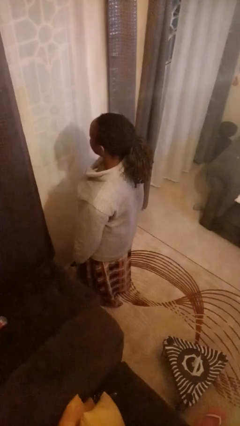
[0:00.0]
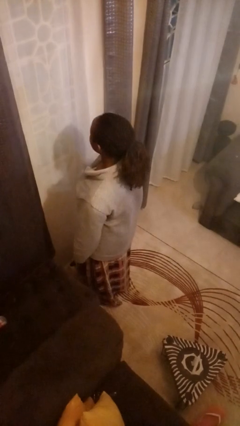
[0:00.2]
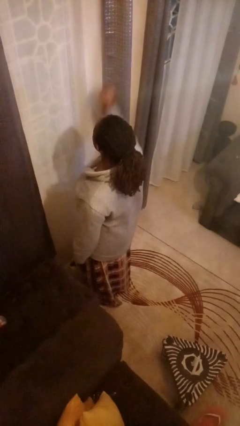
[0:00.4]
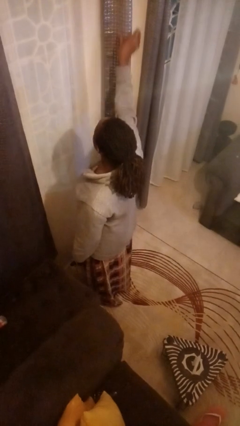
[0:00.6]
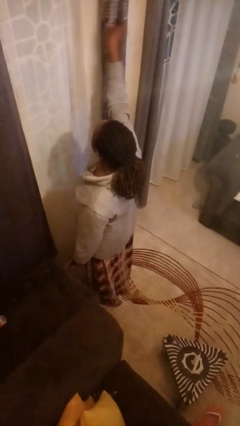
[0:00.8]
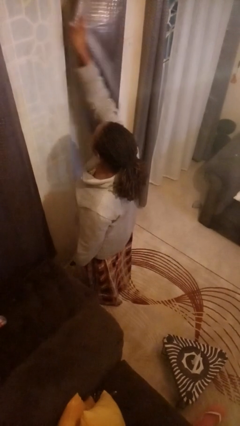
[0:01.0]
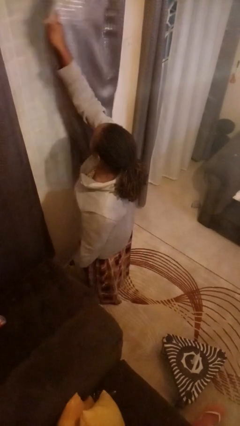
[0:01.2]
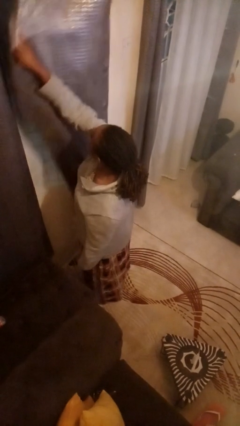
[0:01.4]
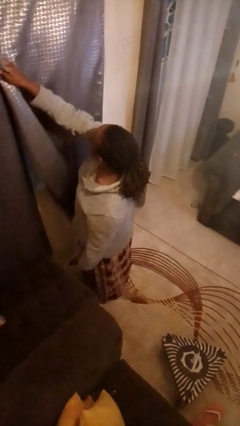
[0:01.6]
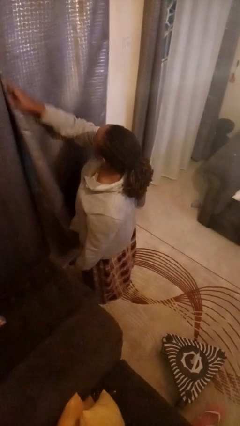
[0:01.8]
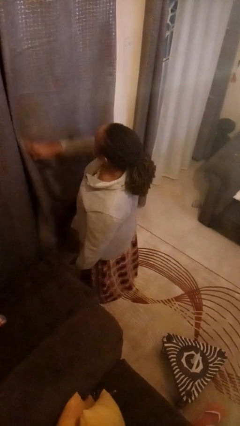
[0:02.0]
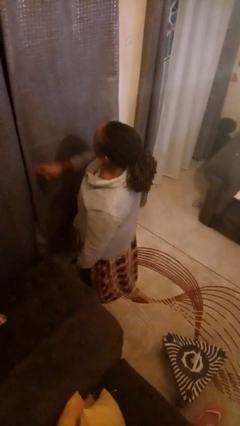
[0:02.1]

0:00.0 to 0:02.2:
person closes curtains

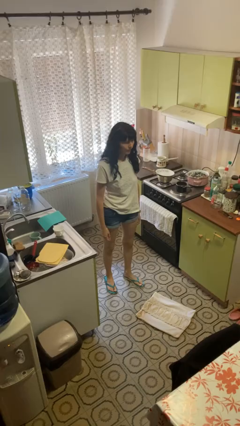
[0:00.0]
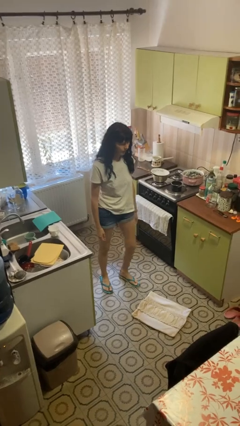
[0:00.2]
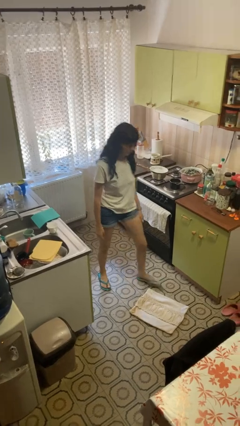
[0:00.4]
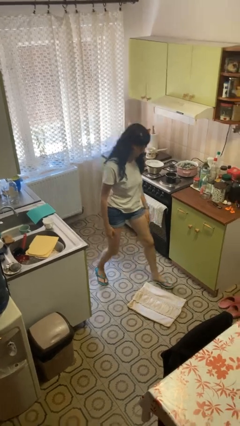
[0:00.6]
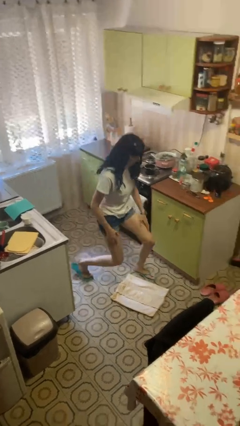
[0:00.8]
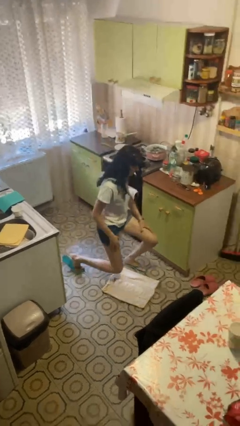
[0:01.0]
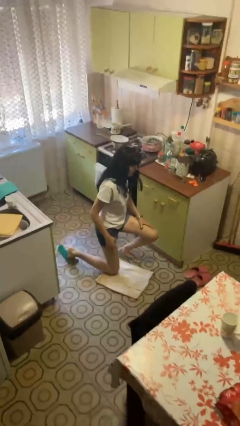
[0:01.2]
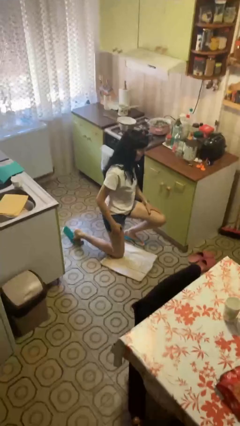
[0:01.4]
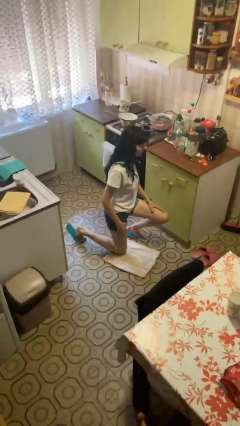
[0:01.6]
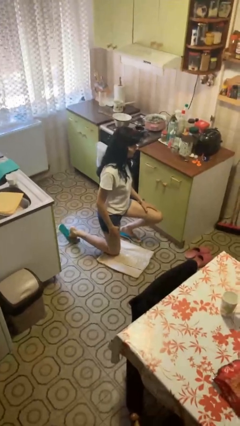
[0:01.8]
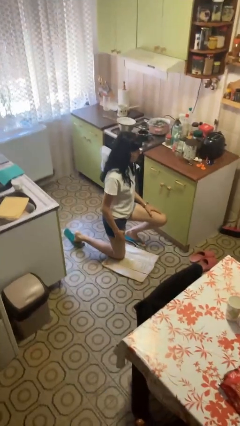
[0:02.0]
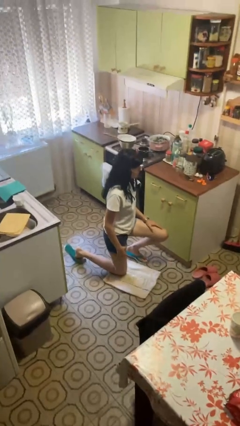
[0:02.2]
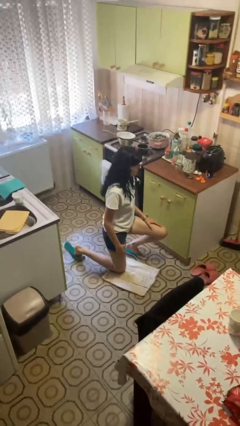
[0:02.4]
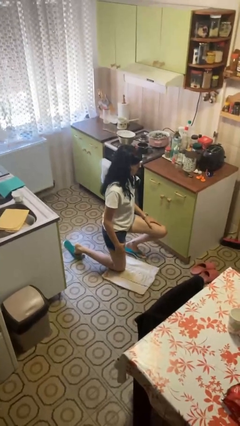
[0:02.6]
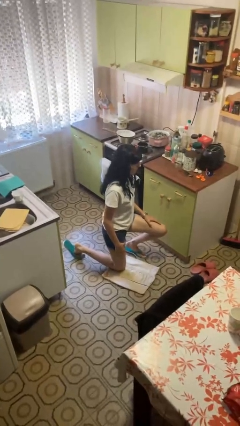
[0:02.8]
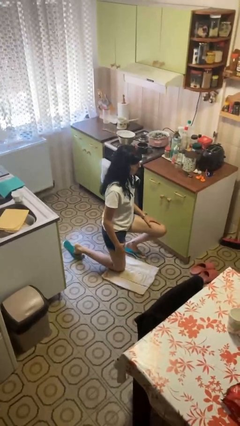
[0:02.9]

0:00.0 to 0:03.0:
person kneels

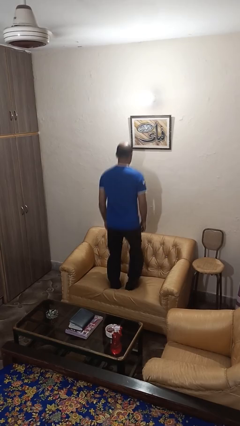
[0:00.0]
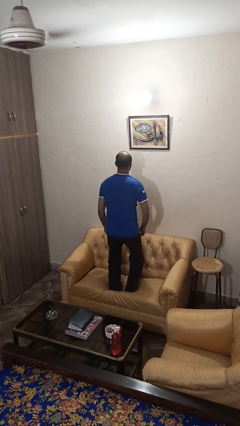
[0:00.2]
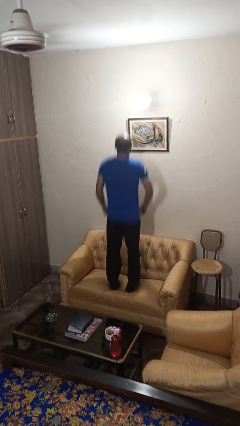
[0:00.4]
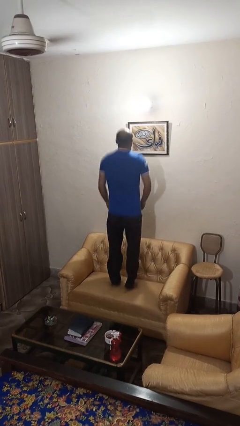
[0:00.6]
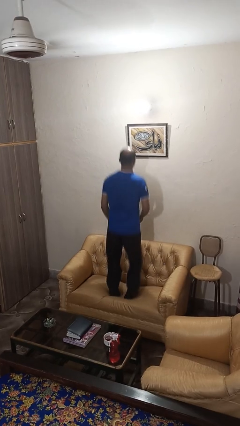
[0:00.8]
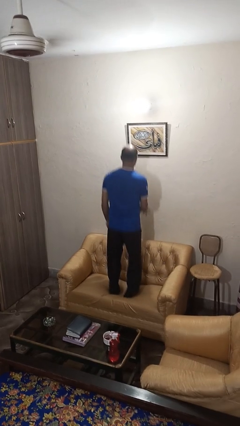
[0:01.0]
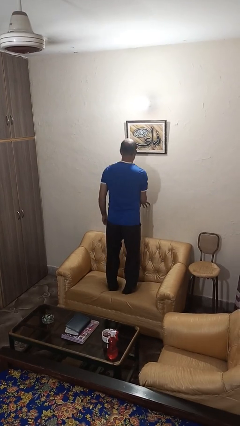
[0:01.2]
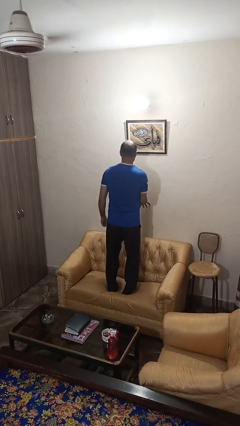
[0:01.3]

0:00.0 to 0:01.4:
person jumps on couch

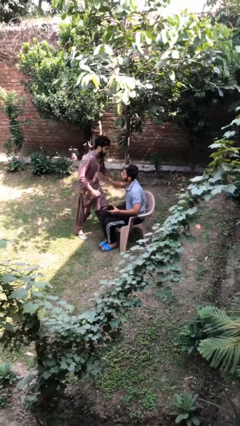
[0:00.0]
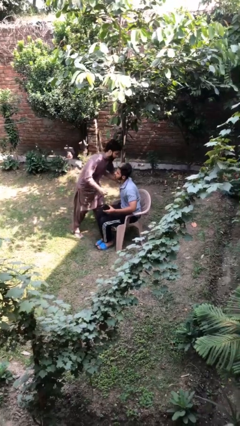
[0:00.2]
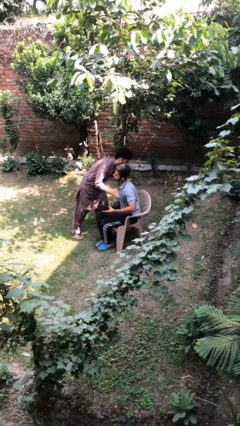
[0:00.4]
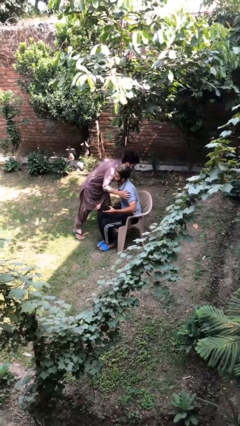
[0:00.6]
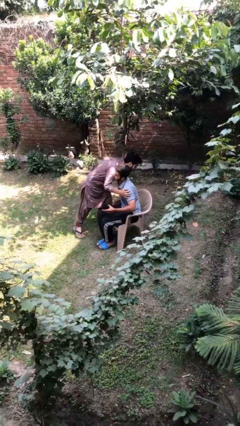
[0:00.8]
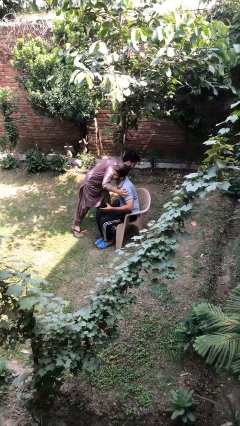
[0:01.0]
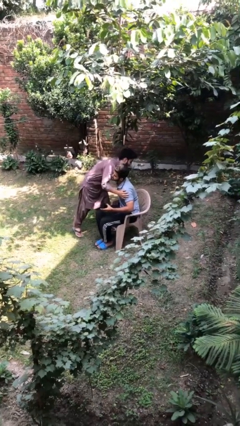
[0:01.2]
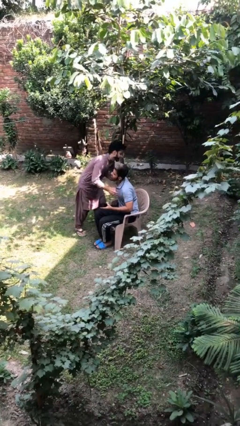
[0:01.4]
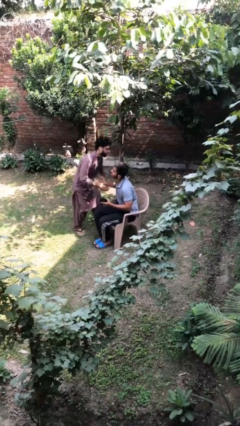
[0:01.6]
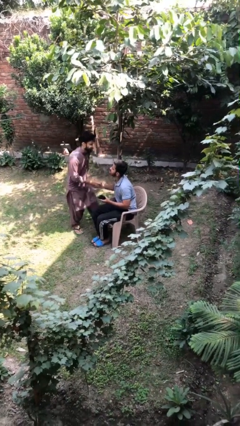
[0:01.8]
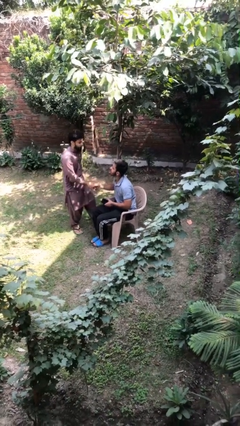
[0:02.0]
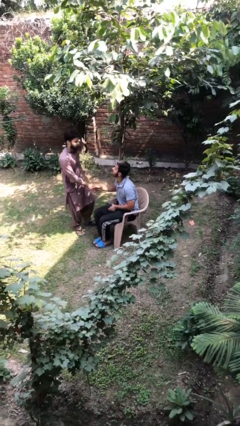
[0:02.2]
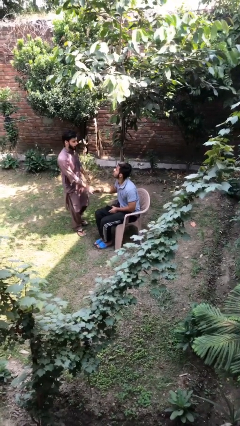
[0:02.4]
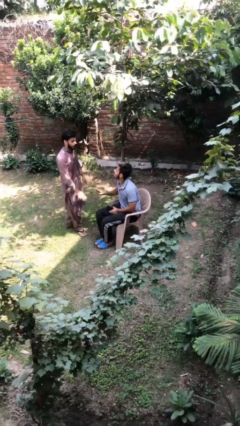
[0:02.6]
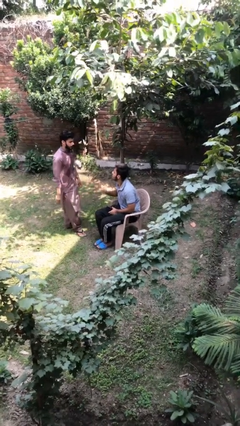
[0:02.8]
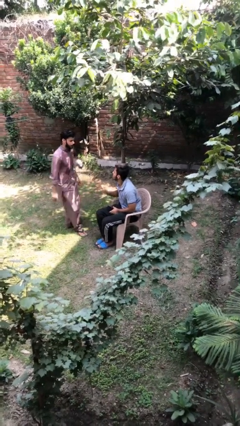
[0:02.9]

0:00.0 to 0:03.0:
person embraces person

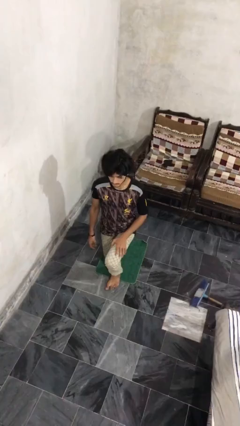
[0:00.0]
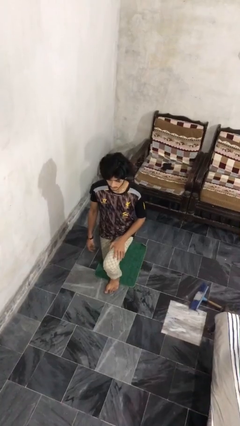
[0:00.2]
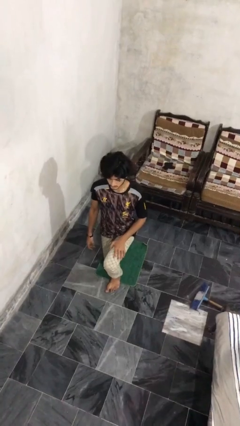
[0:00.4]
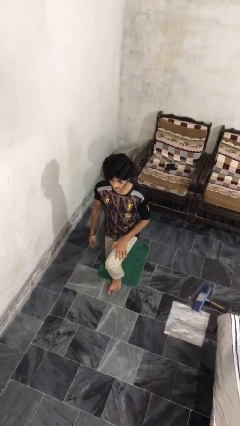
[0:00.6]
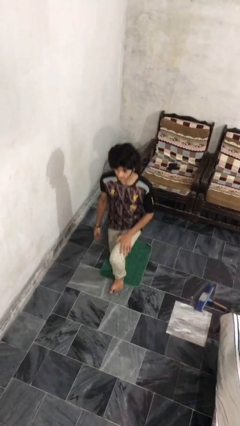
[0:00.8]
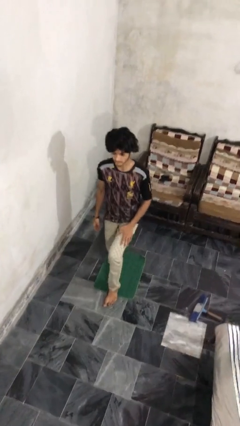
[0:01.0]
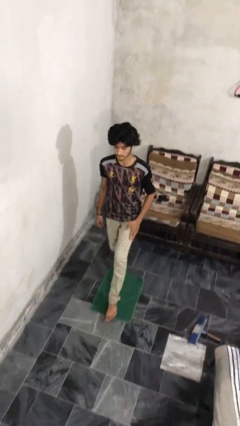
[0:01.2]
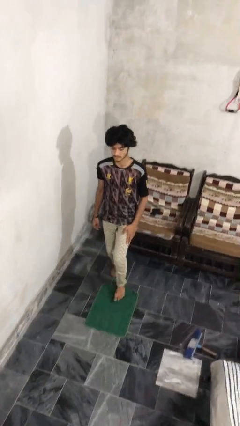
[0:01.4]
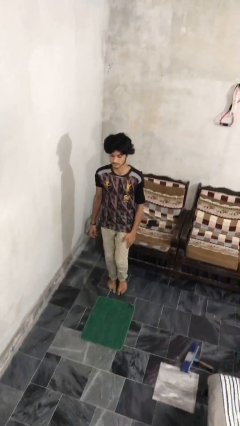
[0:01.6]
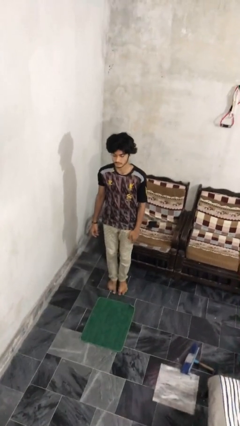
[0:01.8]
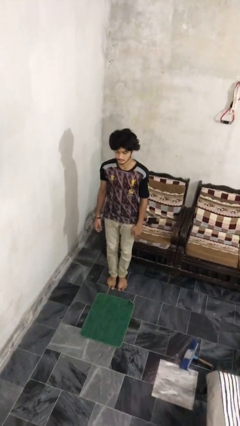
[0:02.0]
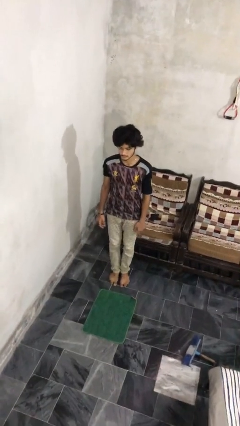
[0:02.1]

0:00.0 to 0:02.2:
person stands up from floor

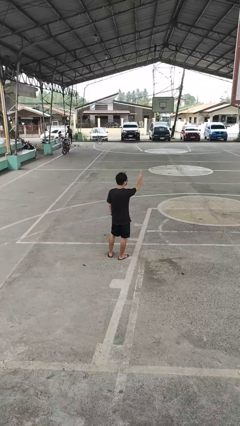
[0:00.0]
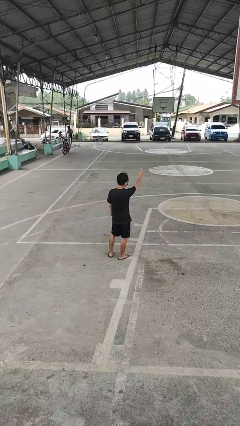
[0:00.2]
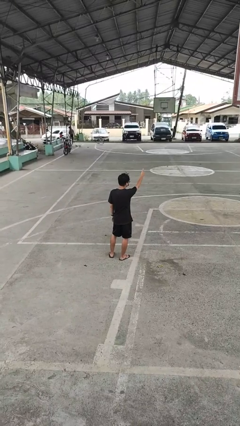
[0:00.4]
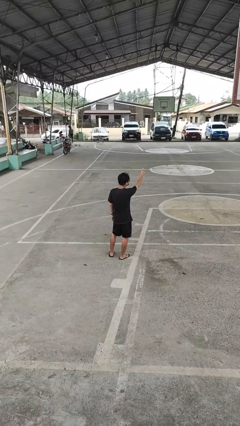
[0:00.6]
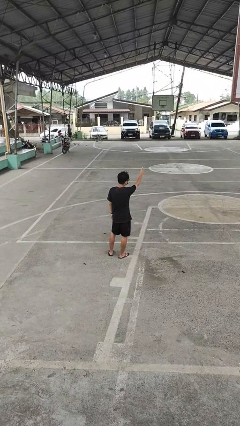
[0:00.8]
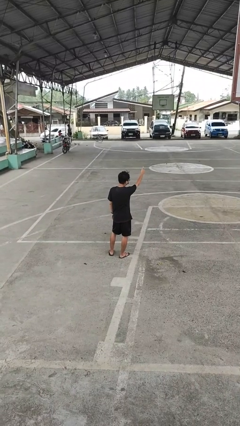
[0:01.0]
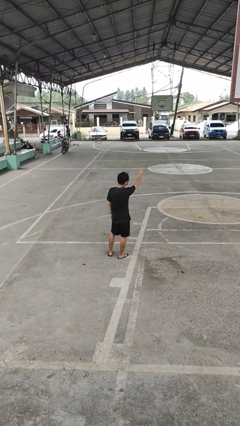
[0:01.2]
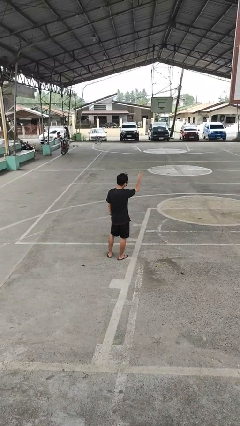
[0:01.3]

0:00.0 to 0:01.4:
person gestures thumbs up

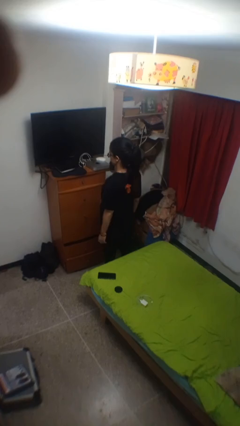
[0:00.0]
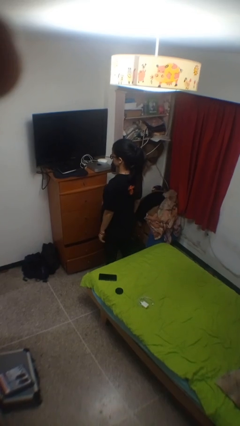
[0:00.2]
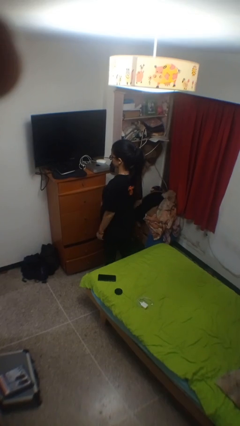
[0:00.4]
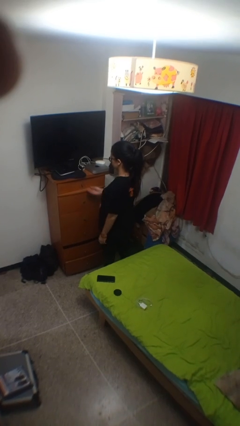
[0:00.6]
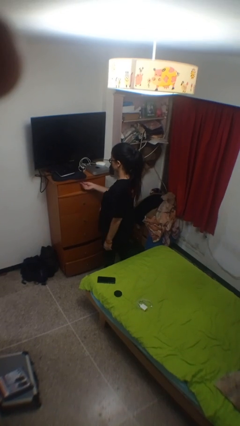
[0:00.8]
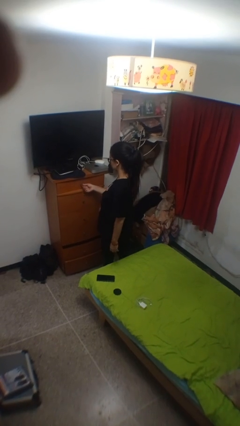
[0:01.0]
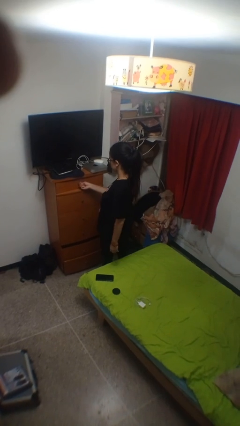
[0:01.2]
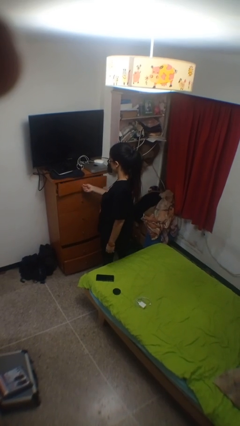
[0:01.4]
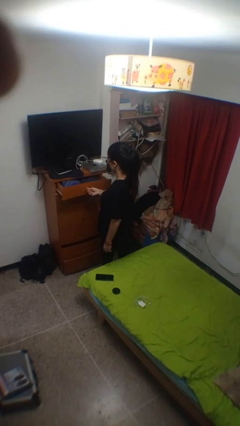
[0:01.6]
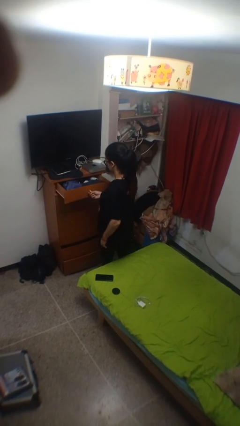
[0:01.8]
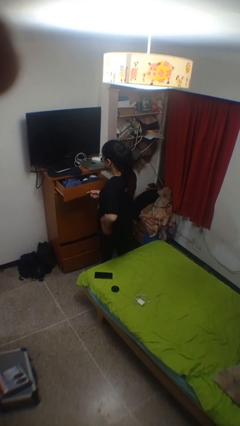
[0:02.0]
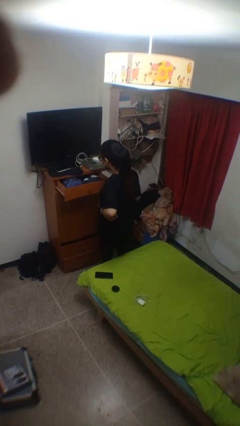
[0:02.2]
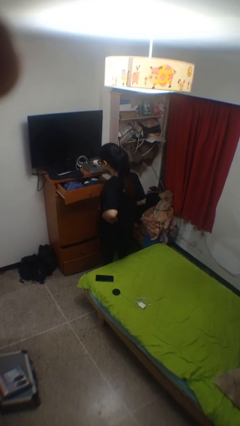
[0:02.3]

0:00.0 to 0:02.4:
person opens dresser drawer

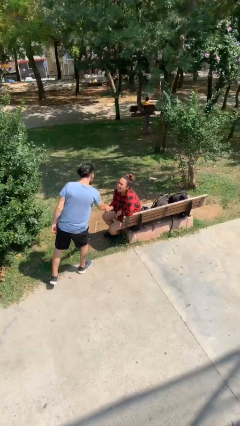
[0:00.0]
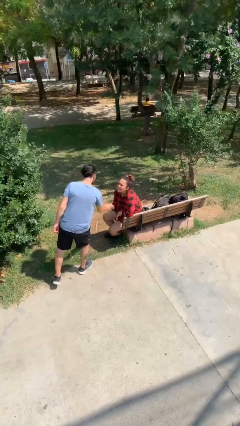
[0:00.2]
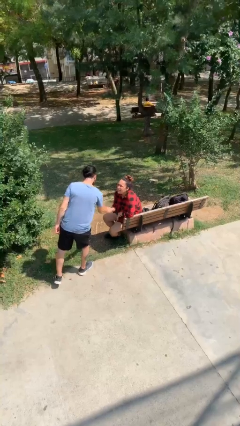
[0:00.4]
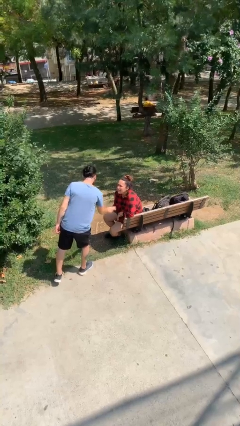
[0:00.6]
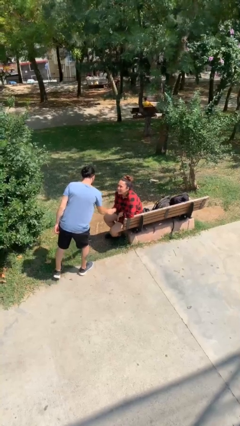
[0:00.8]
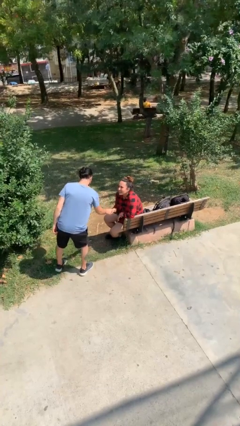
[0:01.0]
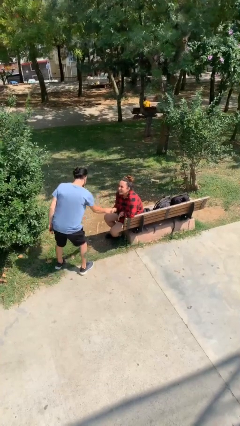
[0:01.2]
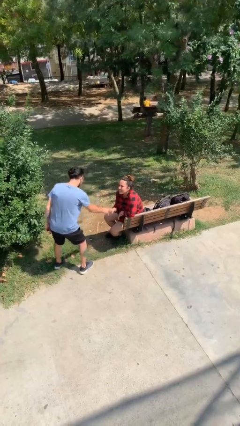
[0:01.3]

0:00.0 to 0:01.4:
person shakes hand
